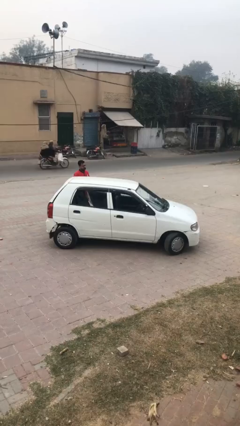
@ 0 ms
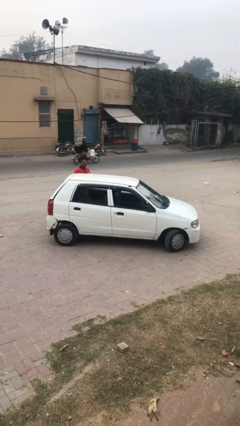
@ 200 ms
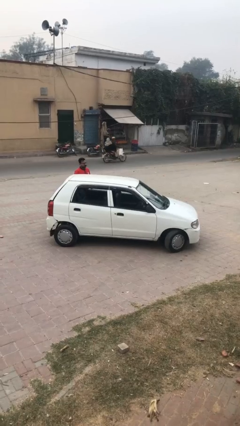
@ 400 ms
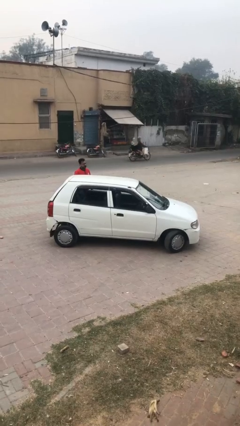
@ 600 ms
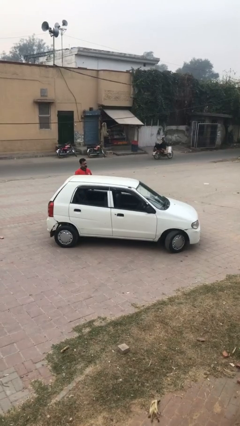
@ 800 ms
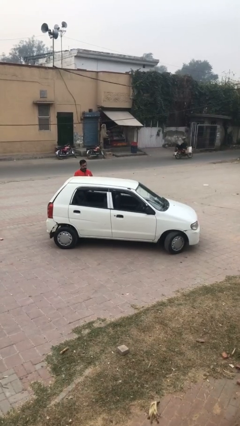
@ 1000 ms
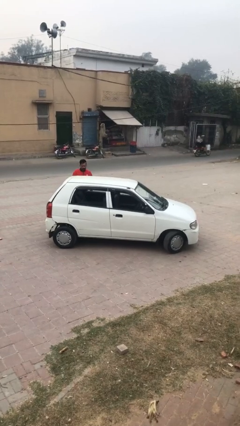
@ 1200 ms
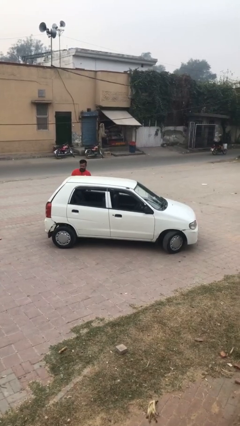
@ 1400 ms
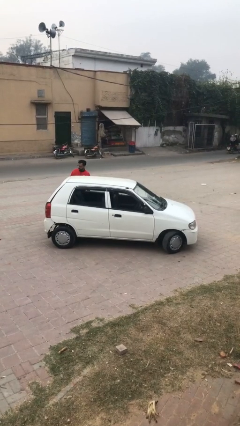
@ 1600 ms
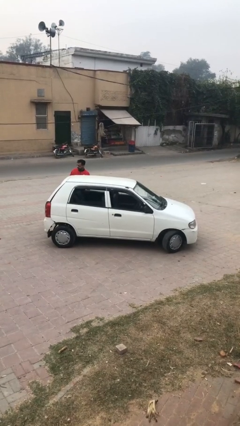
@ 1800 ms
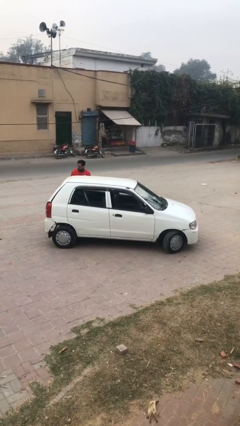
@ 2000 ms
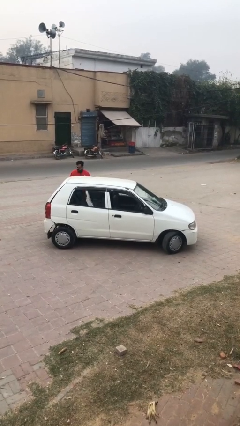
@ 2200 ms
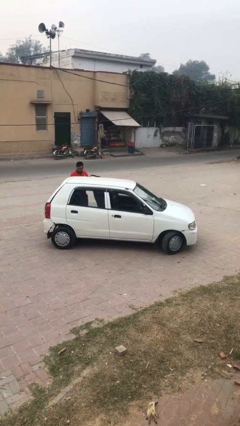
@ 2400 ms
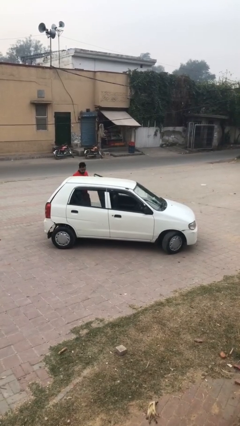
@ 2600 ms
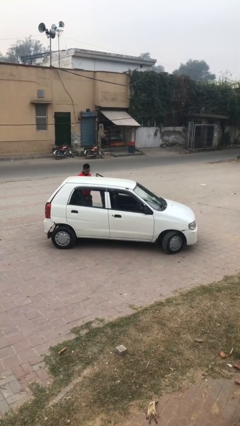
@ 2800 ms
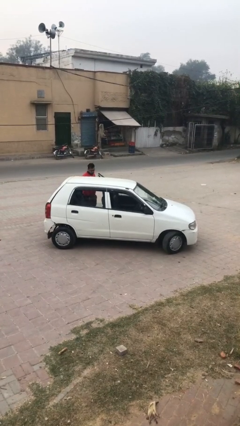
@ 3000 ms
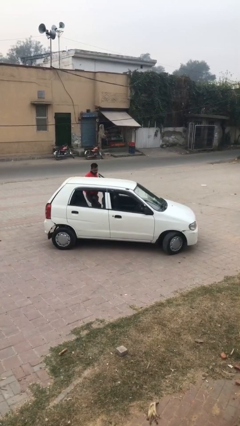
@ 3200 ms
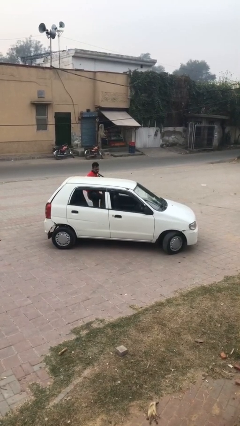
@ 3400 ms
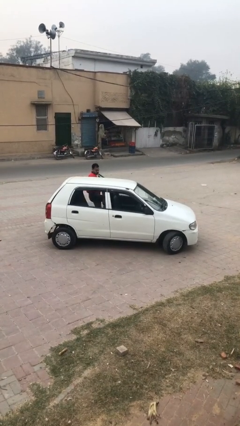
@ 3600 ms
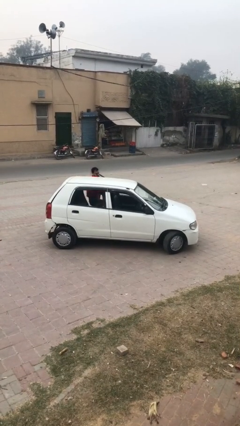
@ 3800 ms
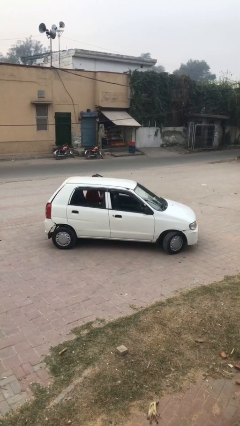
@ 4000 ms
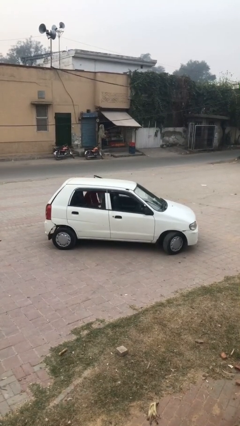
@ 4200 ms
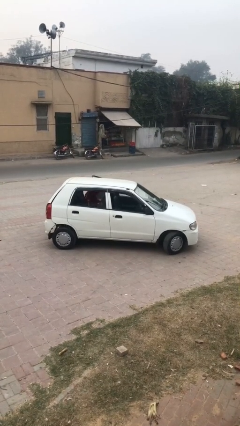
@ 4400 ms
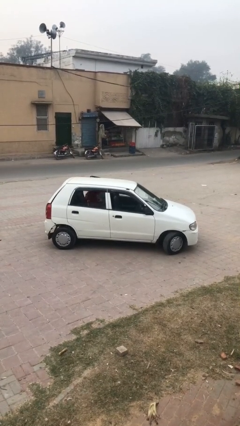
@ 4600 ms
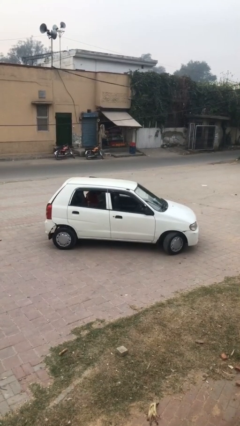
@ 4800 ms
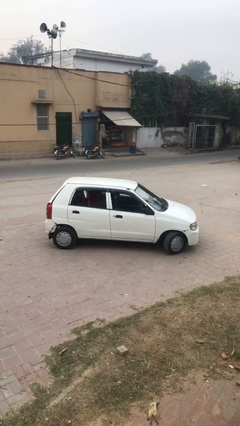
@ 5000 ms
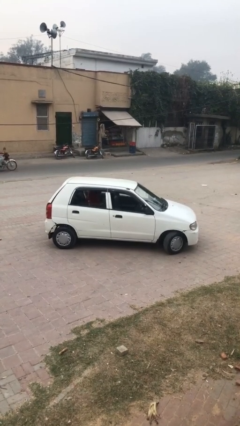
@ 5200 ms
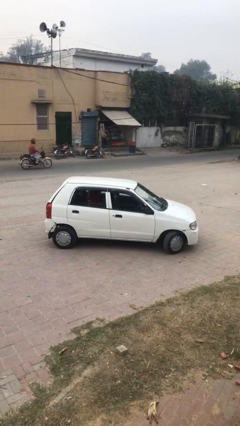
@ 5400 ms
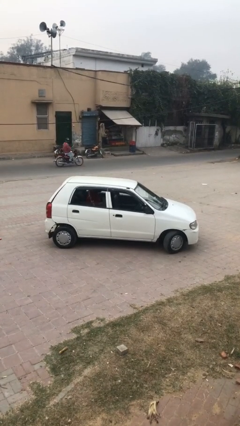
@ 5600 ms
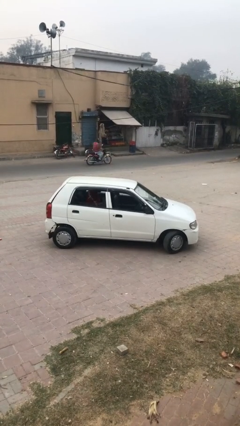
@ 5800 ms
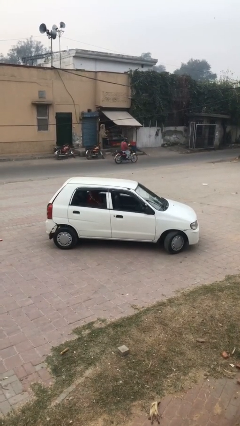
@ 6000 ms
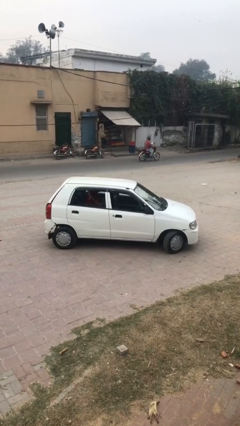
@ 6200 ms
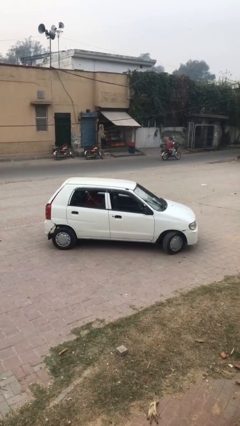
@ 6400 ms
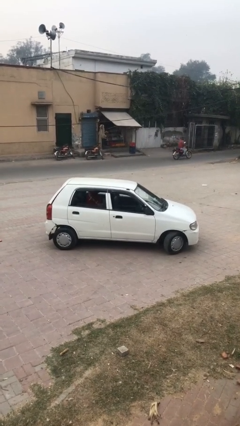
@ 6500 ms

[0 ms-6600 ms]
car picks up person

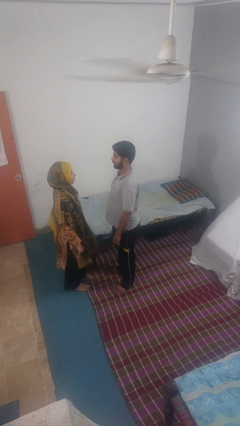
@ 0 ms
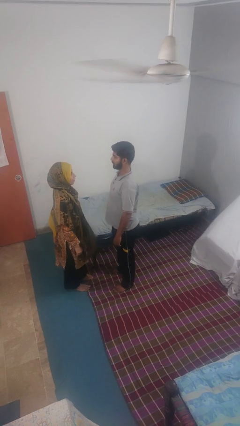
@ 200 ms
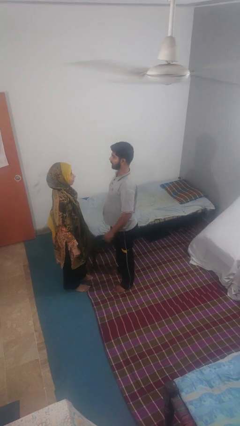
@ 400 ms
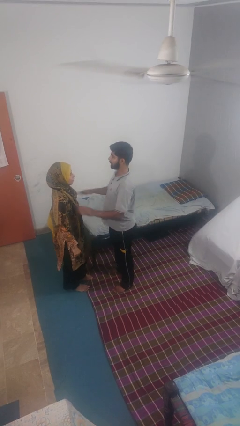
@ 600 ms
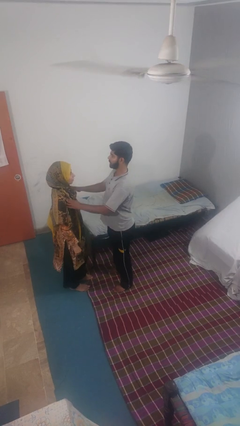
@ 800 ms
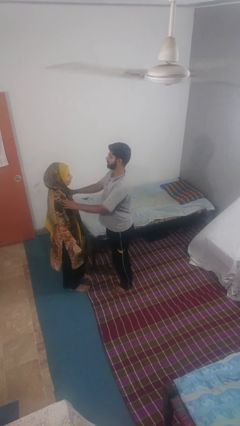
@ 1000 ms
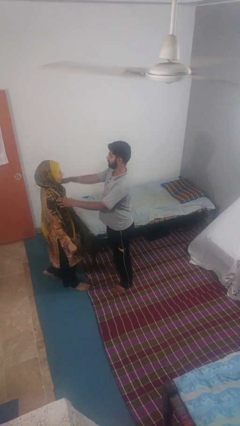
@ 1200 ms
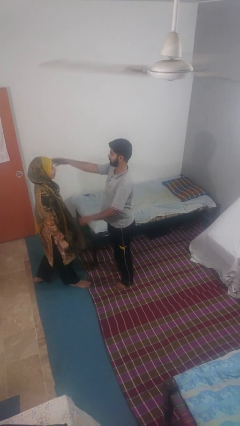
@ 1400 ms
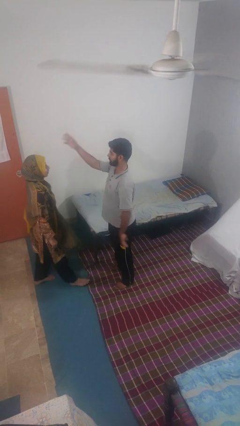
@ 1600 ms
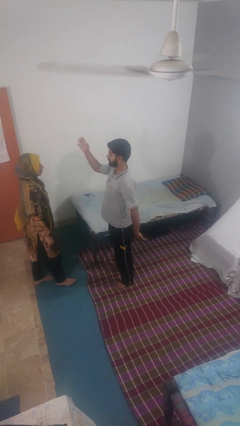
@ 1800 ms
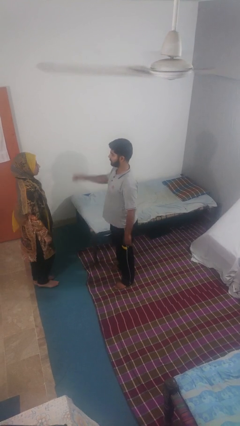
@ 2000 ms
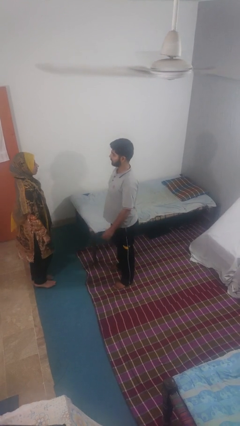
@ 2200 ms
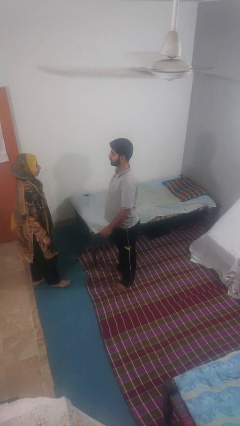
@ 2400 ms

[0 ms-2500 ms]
person shoves person

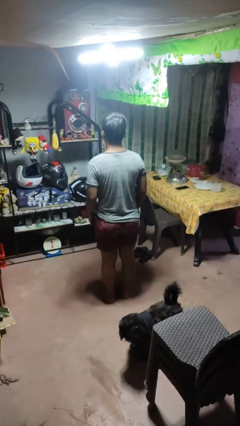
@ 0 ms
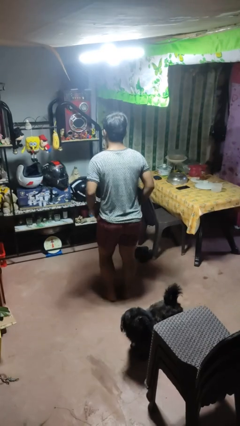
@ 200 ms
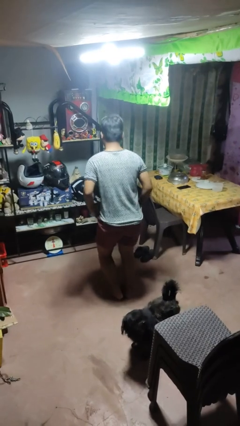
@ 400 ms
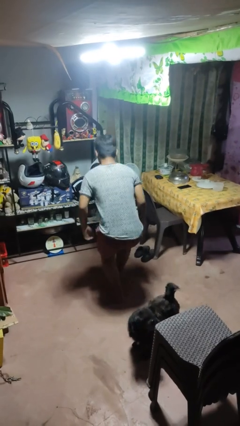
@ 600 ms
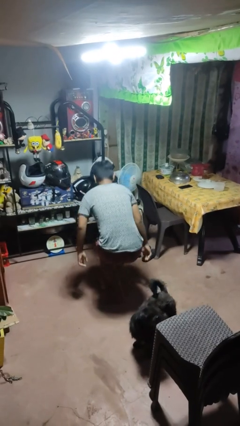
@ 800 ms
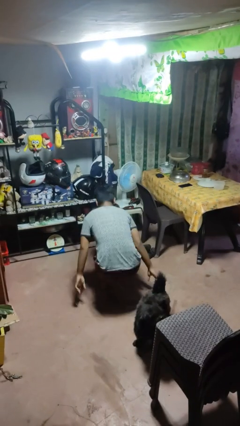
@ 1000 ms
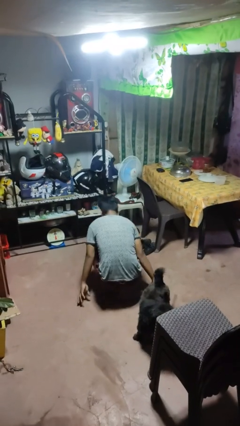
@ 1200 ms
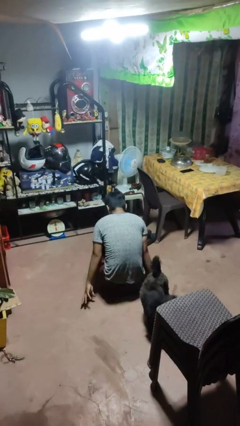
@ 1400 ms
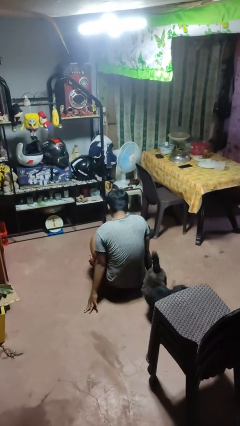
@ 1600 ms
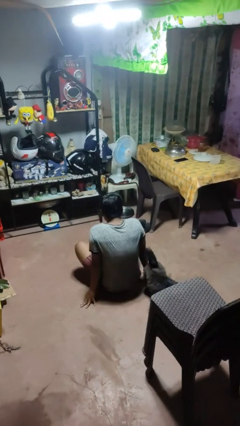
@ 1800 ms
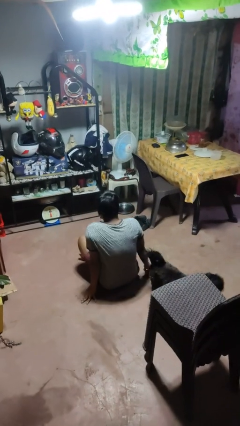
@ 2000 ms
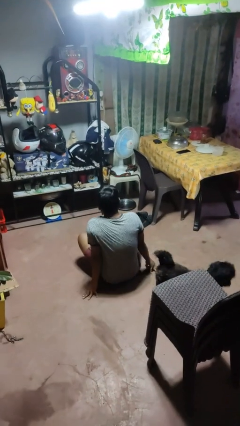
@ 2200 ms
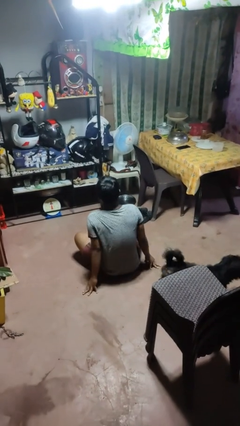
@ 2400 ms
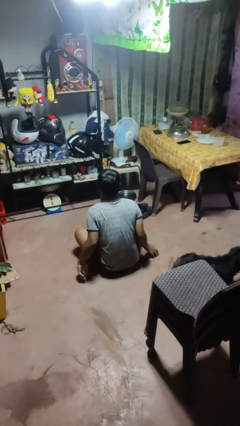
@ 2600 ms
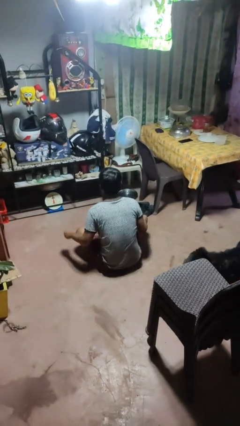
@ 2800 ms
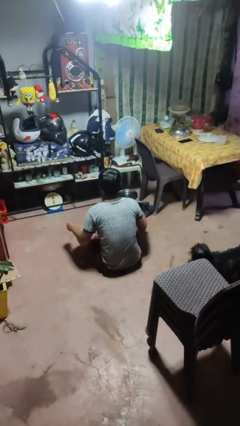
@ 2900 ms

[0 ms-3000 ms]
person sits crisscross

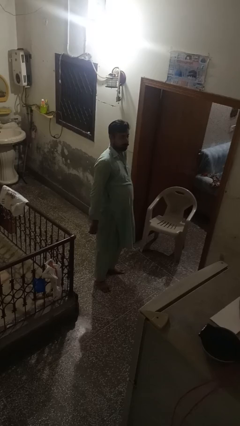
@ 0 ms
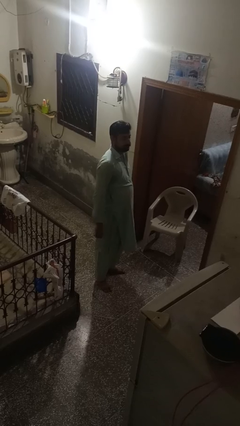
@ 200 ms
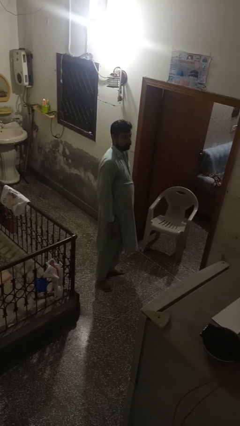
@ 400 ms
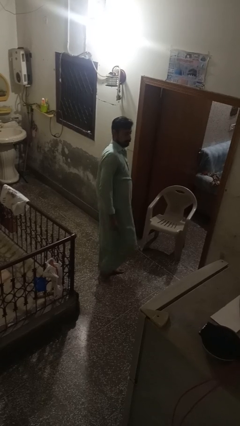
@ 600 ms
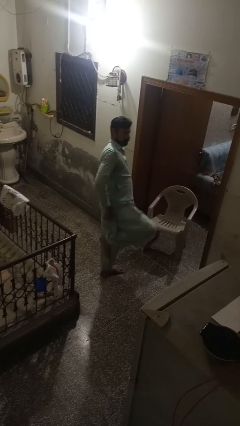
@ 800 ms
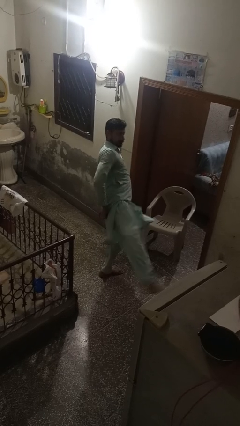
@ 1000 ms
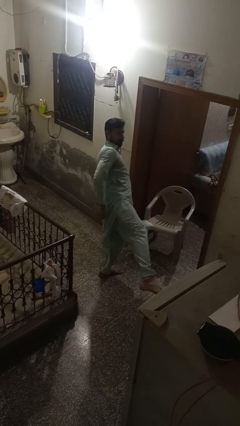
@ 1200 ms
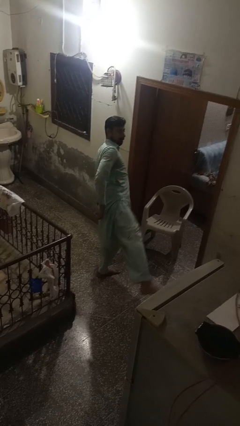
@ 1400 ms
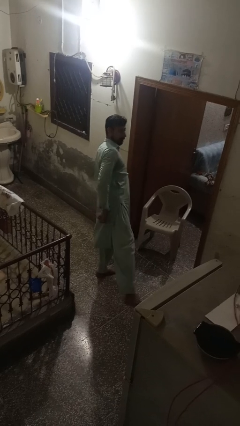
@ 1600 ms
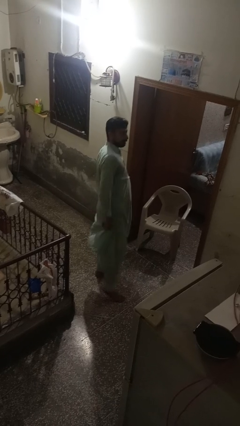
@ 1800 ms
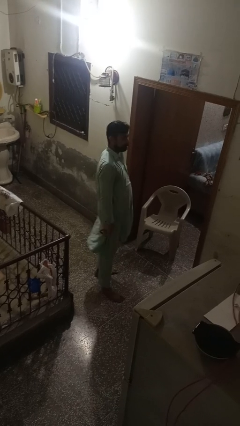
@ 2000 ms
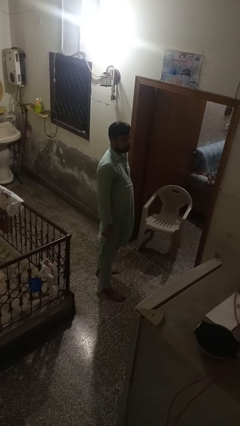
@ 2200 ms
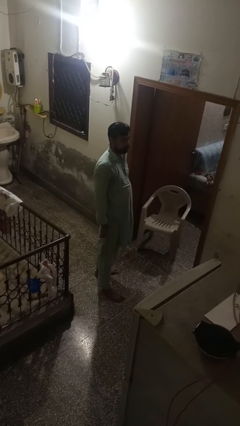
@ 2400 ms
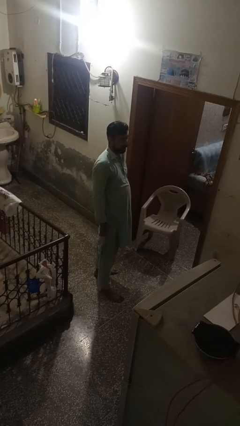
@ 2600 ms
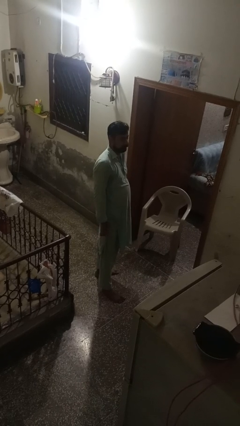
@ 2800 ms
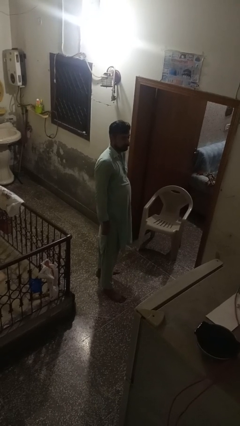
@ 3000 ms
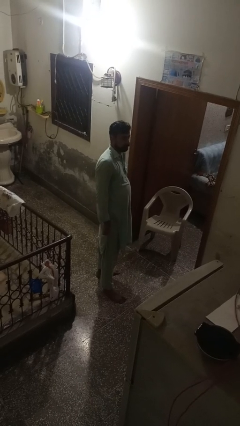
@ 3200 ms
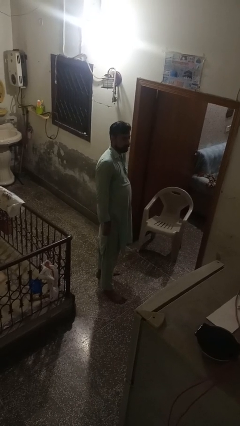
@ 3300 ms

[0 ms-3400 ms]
person karate kicks

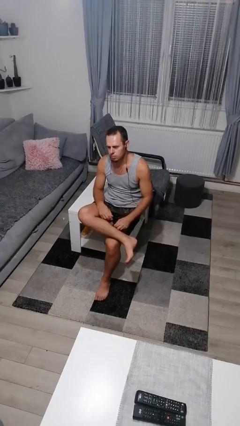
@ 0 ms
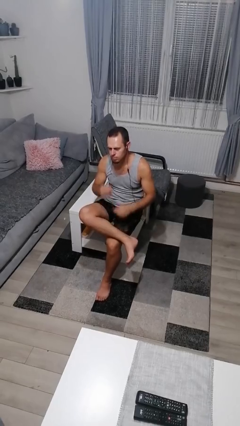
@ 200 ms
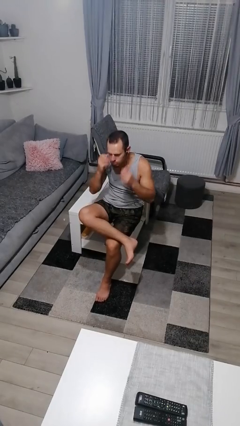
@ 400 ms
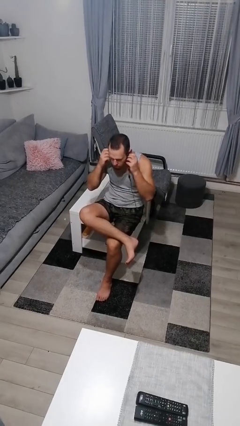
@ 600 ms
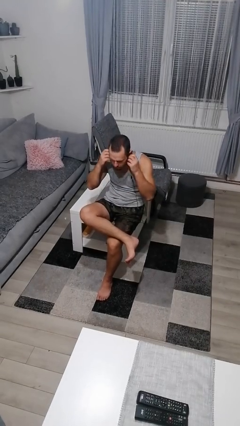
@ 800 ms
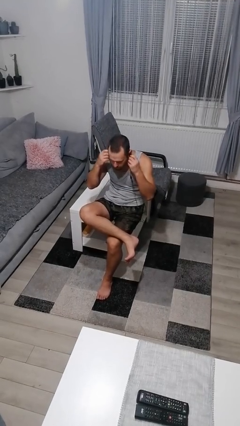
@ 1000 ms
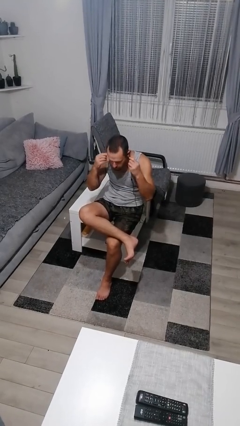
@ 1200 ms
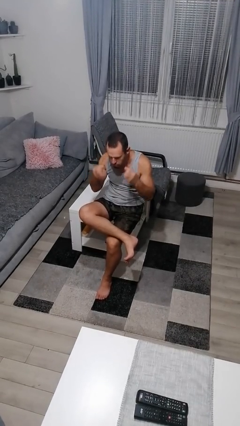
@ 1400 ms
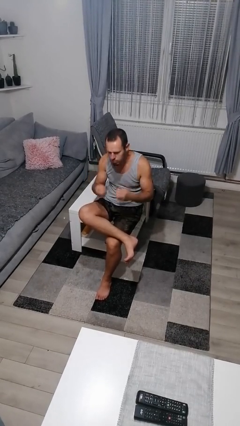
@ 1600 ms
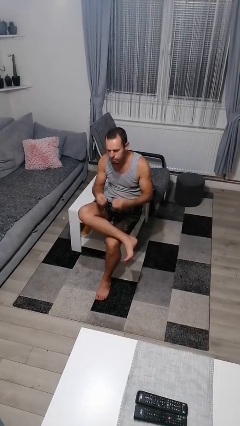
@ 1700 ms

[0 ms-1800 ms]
person takes off headphones
